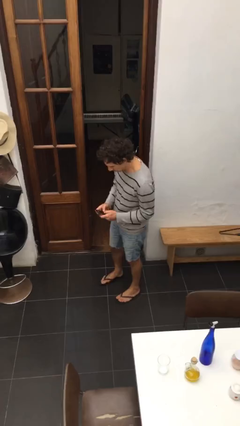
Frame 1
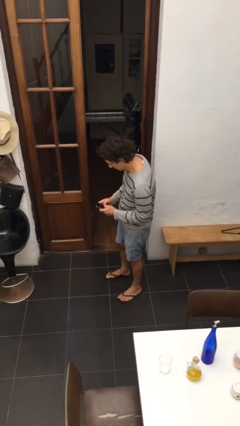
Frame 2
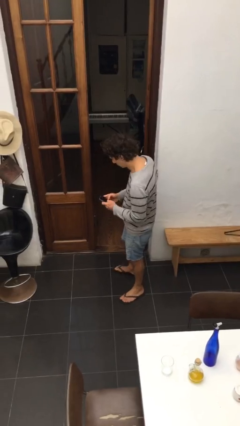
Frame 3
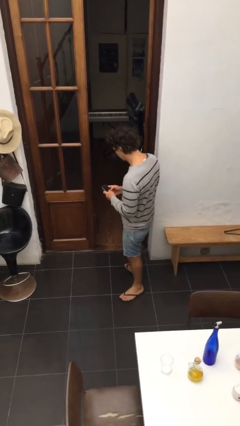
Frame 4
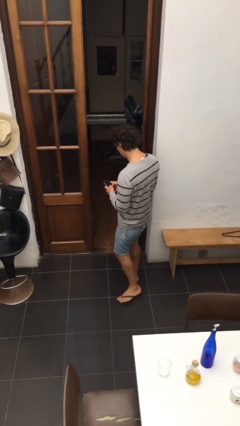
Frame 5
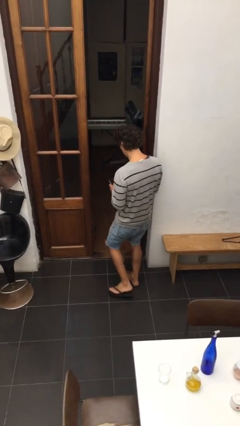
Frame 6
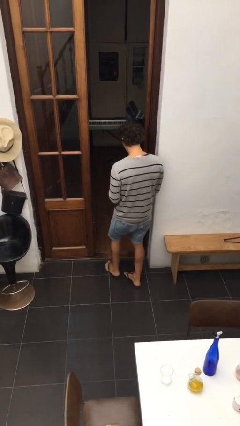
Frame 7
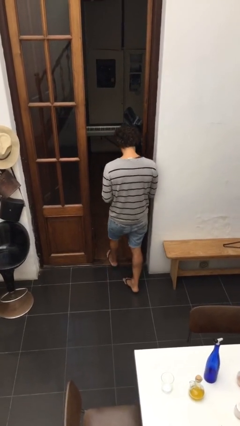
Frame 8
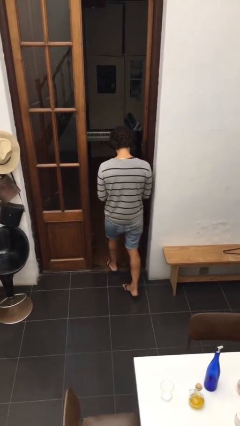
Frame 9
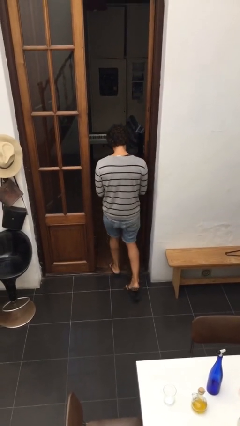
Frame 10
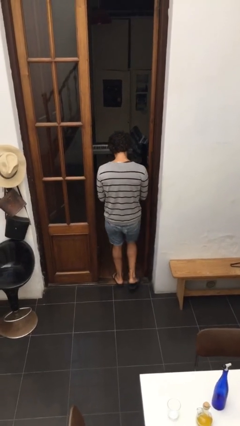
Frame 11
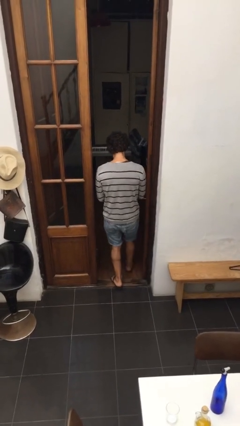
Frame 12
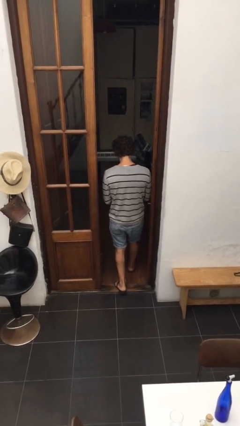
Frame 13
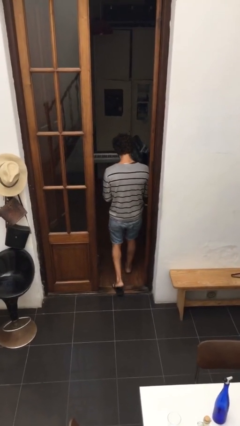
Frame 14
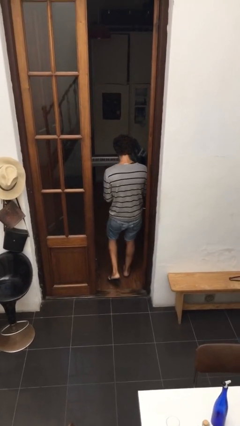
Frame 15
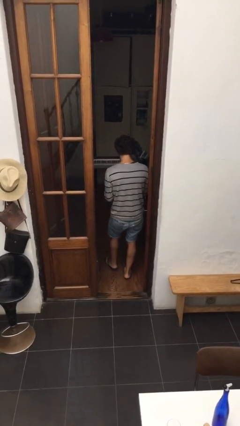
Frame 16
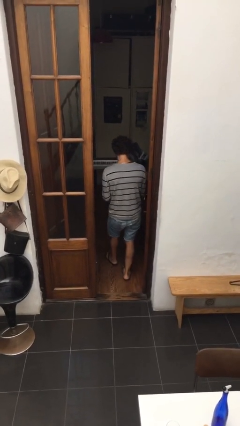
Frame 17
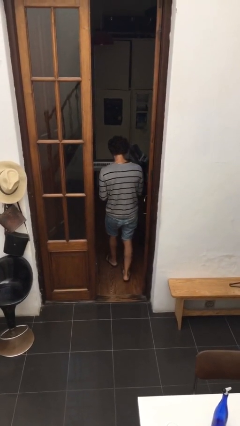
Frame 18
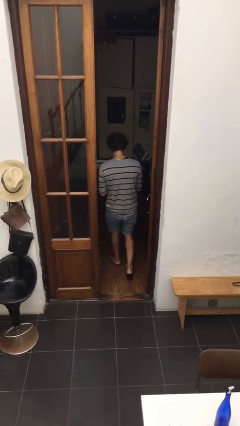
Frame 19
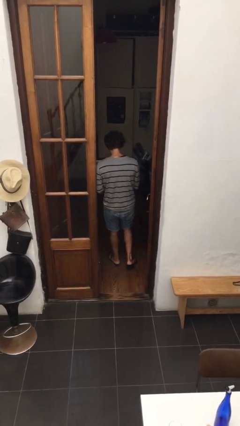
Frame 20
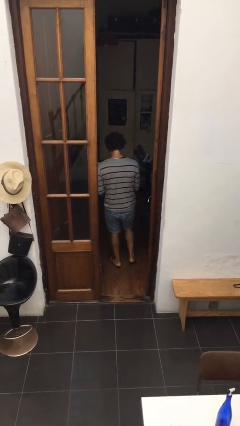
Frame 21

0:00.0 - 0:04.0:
person exits scene through structure

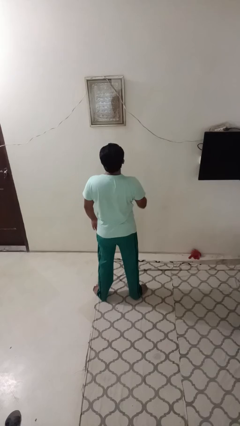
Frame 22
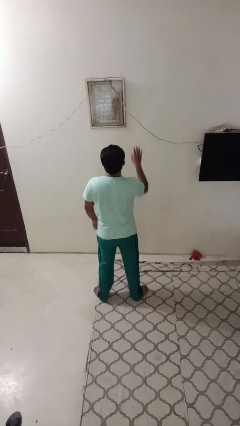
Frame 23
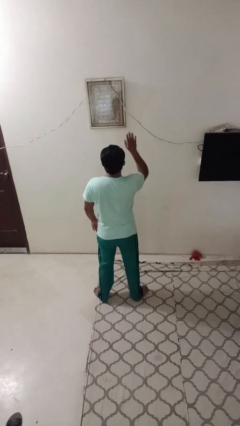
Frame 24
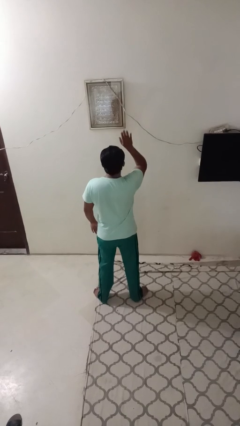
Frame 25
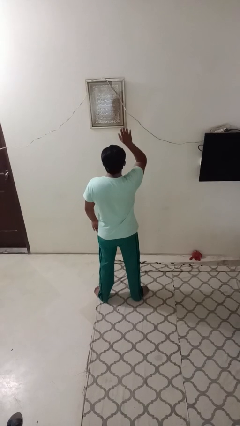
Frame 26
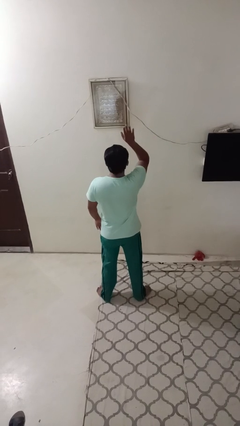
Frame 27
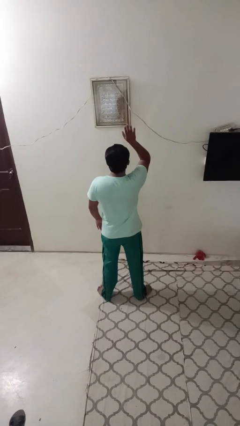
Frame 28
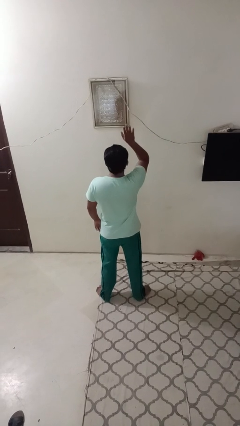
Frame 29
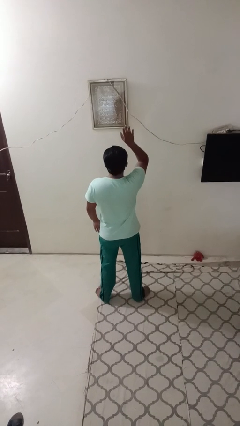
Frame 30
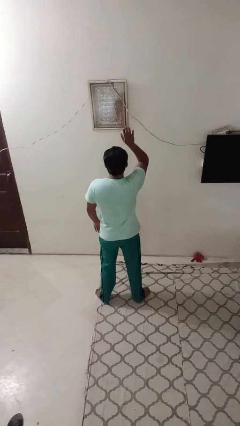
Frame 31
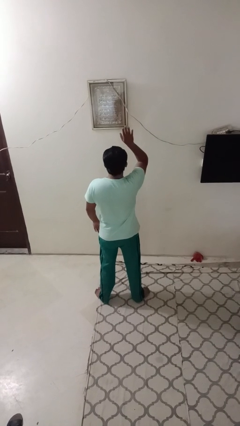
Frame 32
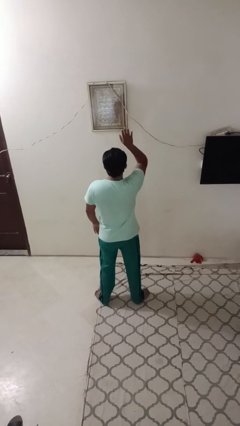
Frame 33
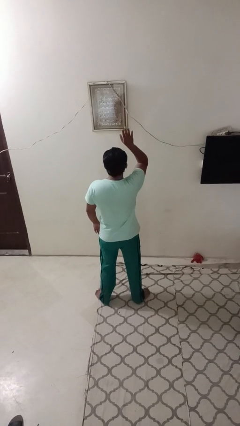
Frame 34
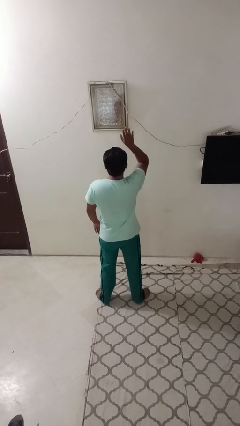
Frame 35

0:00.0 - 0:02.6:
person gestures raise hand

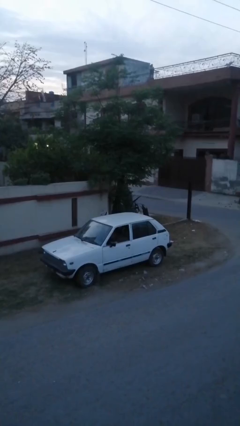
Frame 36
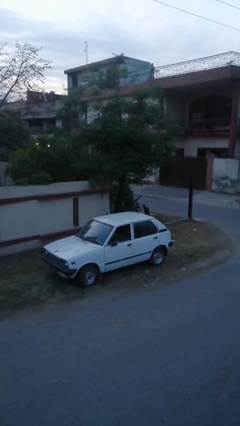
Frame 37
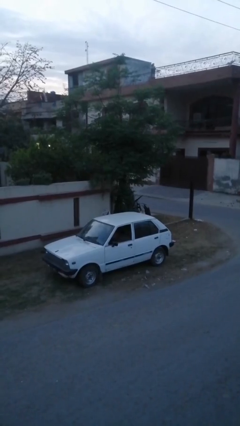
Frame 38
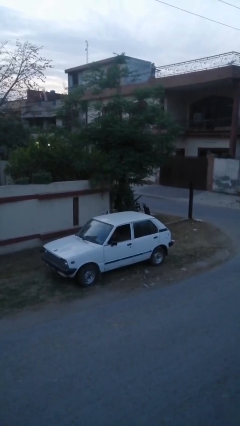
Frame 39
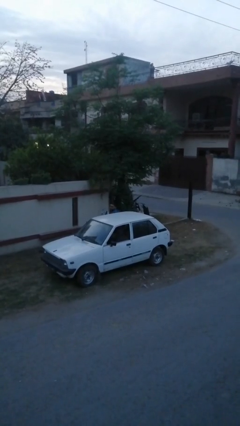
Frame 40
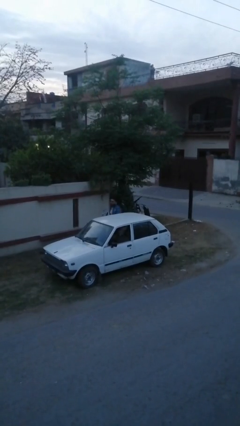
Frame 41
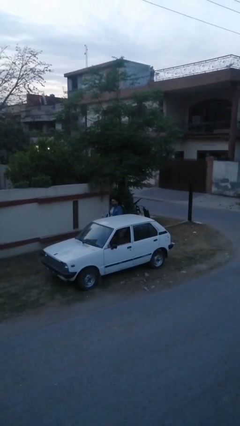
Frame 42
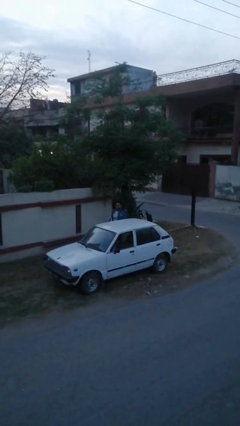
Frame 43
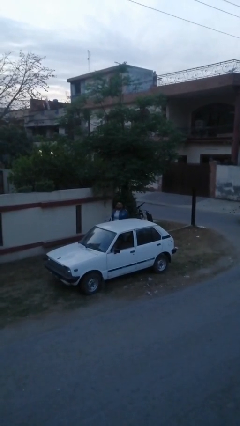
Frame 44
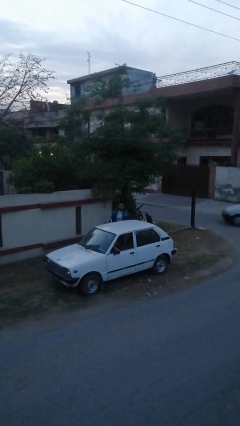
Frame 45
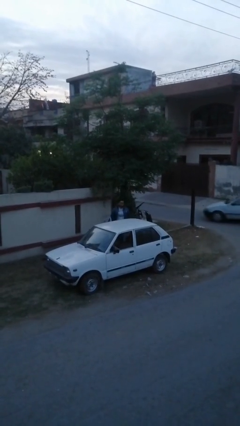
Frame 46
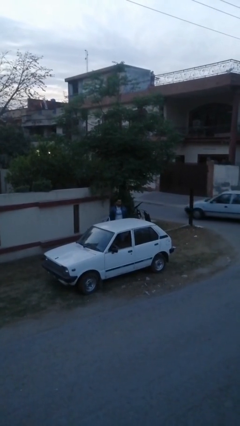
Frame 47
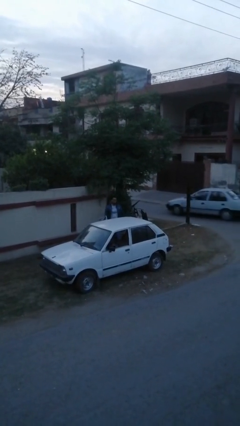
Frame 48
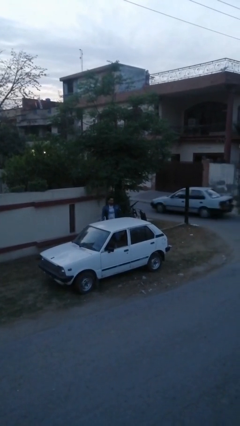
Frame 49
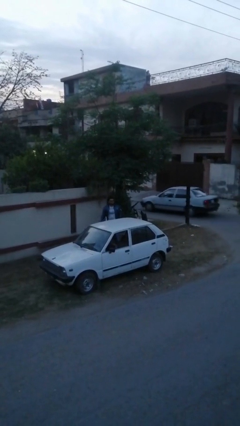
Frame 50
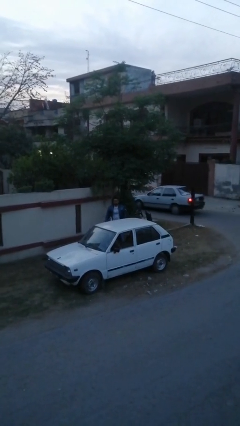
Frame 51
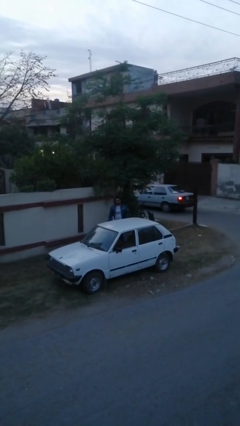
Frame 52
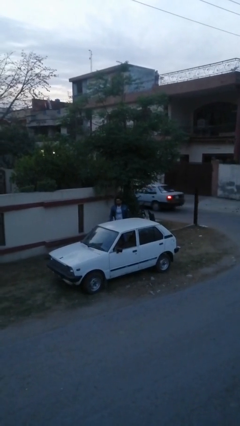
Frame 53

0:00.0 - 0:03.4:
person exits car

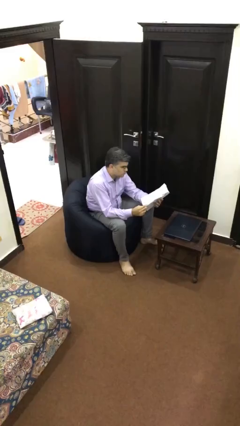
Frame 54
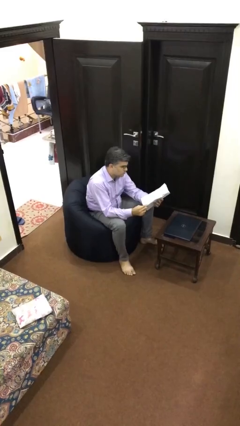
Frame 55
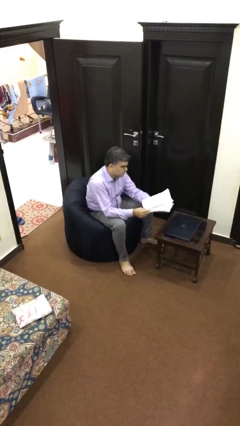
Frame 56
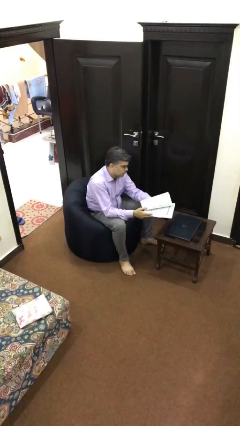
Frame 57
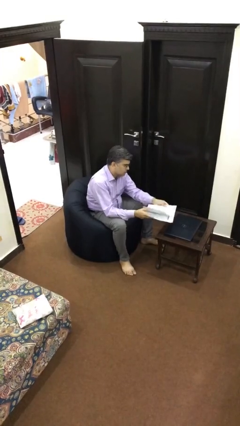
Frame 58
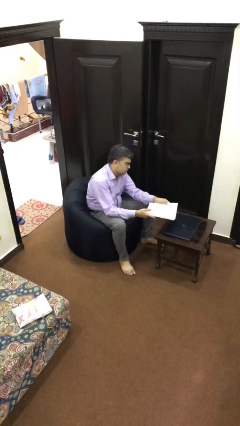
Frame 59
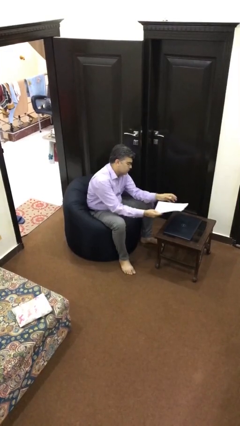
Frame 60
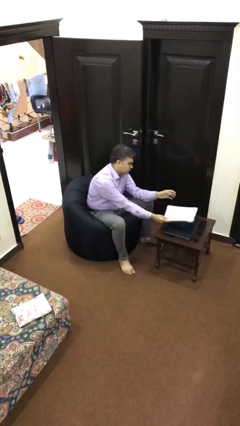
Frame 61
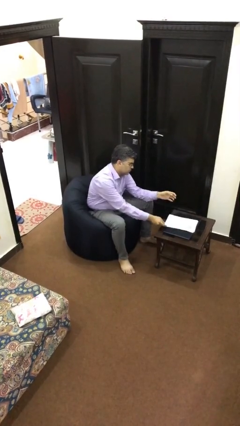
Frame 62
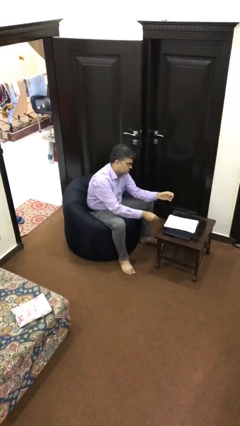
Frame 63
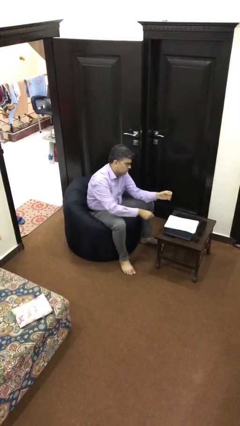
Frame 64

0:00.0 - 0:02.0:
person puts down object on table

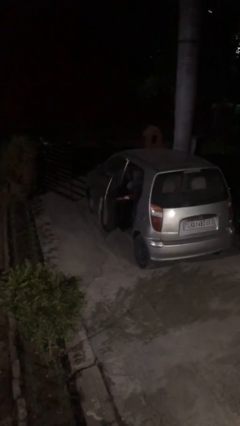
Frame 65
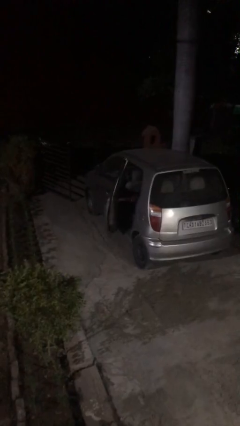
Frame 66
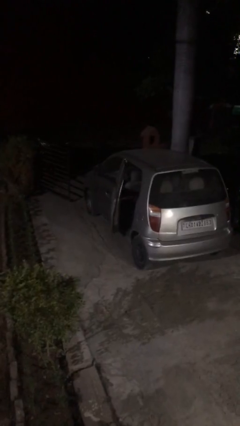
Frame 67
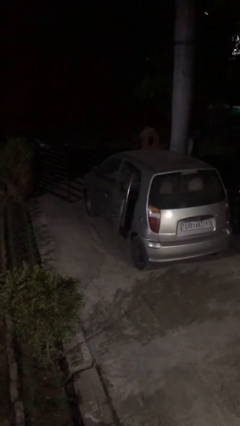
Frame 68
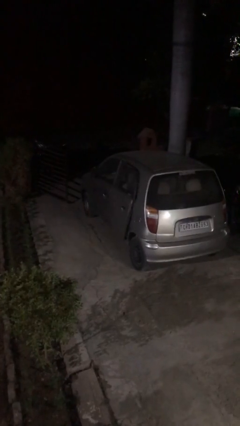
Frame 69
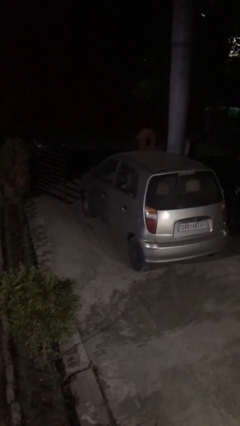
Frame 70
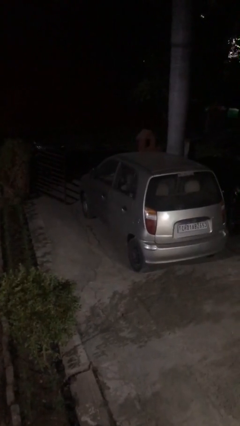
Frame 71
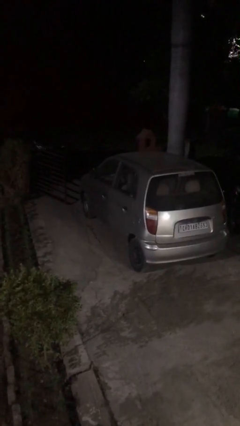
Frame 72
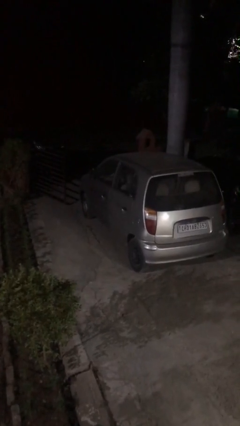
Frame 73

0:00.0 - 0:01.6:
person closes car door

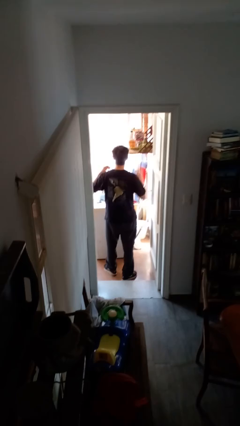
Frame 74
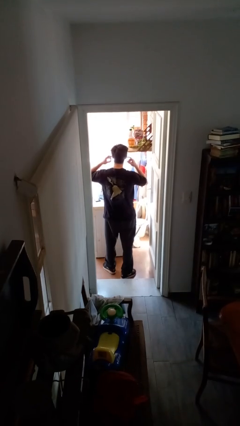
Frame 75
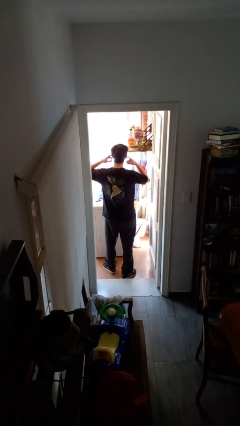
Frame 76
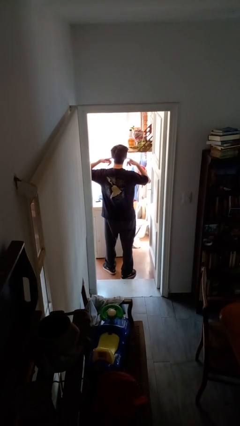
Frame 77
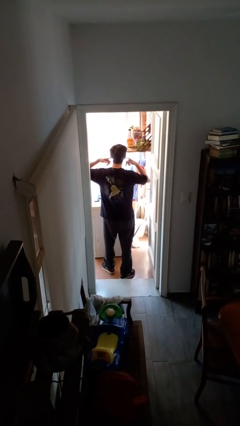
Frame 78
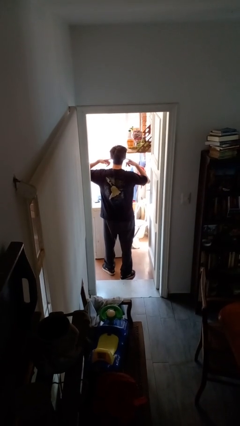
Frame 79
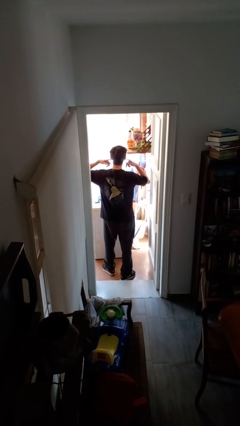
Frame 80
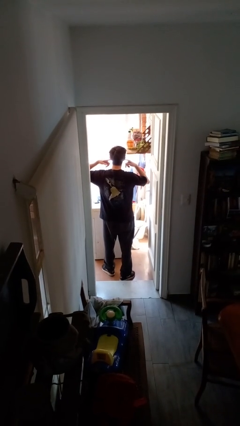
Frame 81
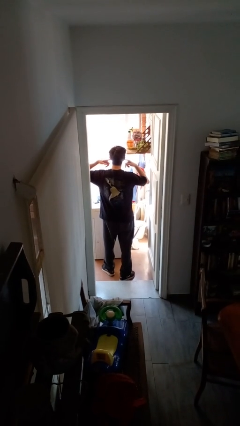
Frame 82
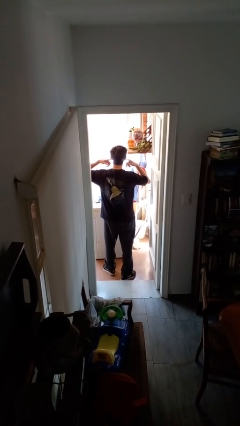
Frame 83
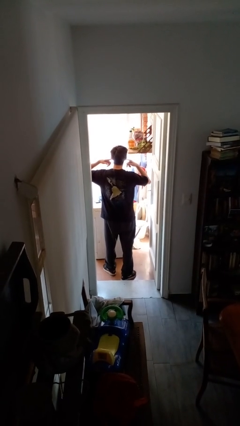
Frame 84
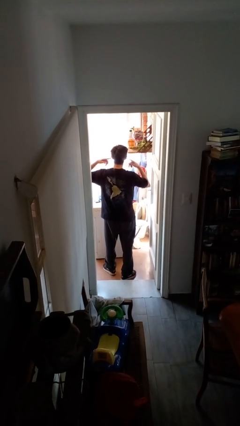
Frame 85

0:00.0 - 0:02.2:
person puts fingers in ear

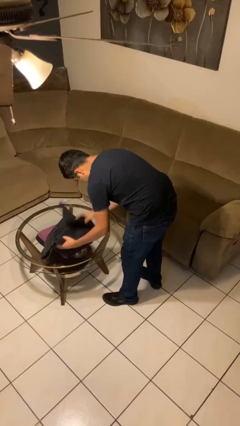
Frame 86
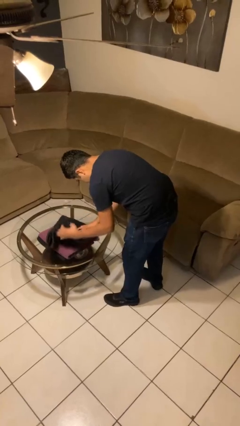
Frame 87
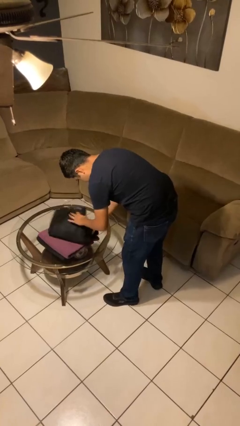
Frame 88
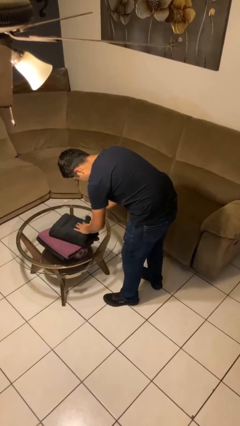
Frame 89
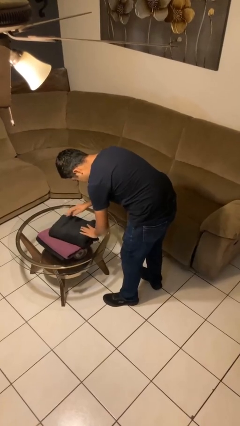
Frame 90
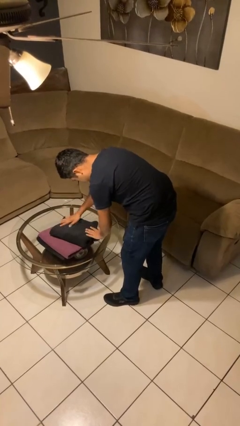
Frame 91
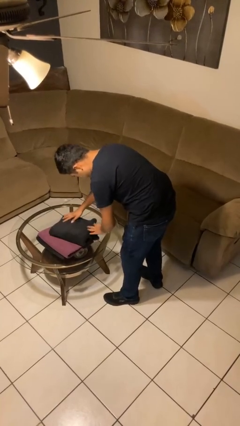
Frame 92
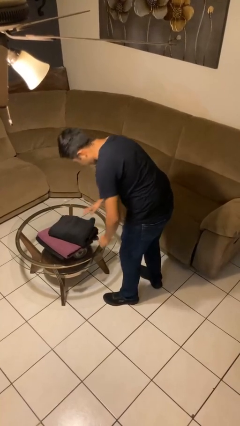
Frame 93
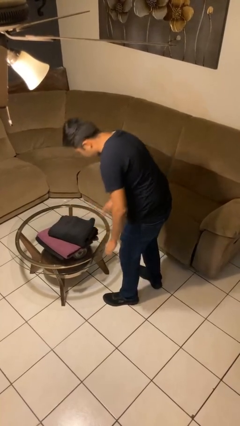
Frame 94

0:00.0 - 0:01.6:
person folds towel
